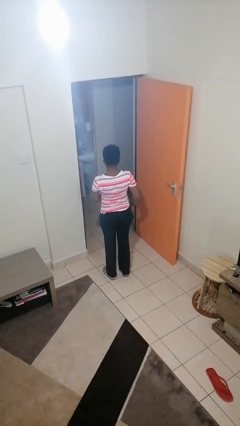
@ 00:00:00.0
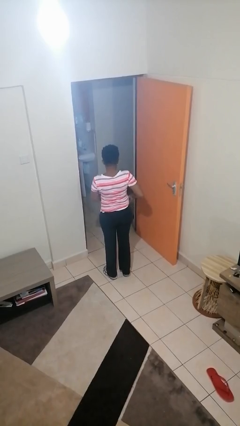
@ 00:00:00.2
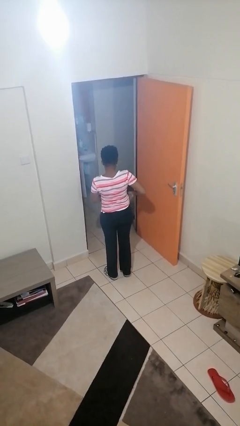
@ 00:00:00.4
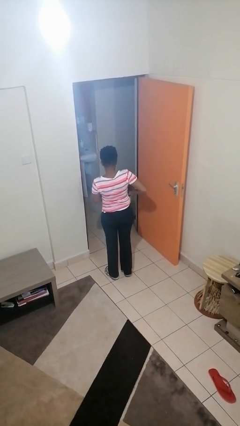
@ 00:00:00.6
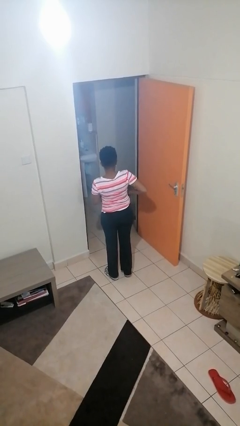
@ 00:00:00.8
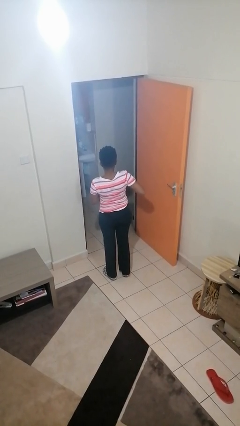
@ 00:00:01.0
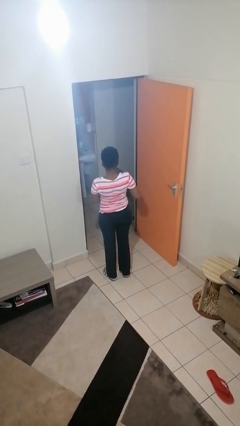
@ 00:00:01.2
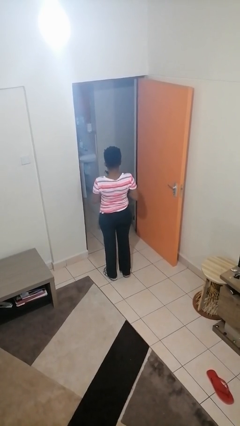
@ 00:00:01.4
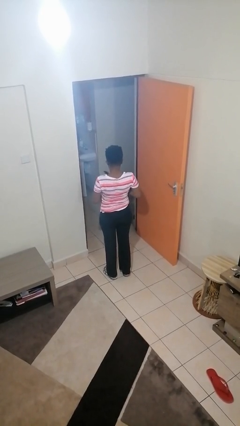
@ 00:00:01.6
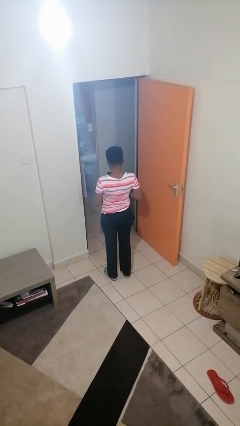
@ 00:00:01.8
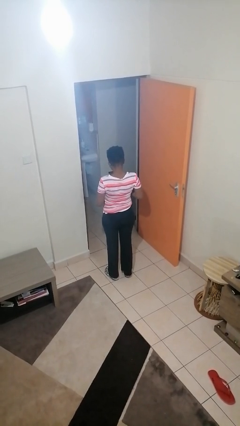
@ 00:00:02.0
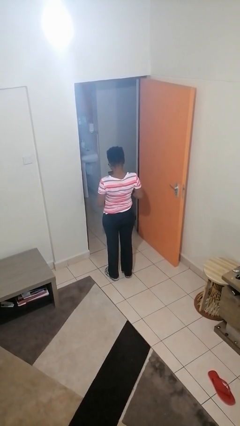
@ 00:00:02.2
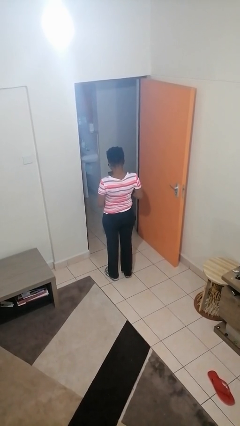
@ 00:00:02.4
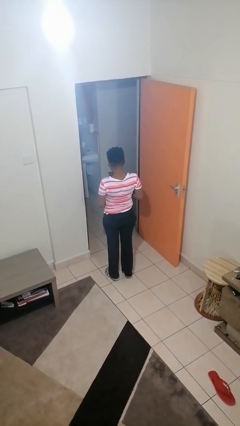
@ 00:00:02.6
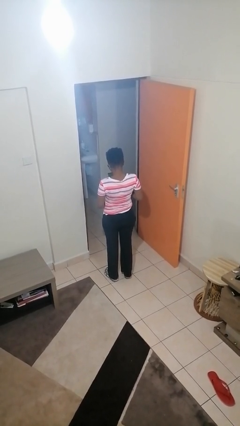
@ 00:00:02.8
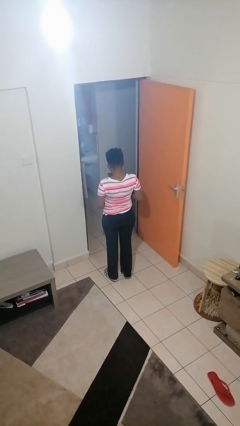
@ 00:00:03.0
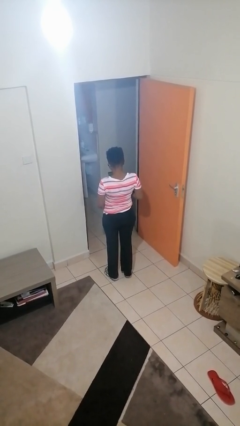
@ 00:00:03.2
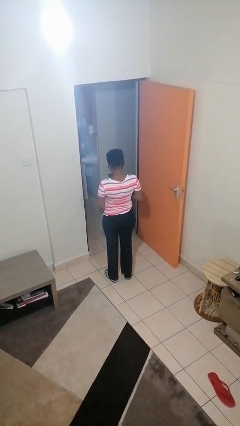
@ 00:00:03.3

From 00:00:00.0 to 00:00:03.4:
person takes phone from pocket

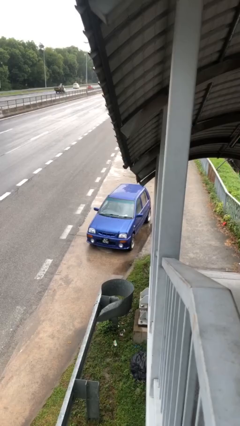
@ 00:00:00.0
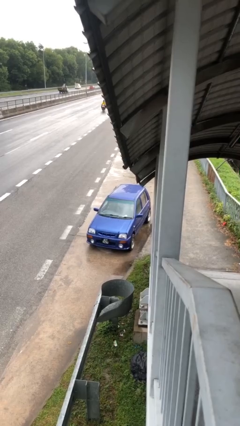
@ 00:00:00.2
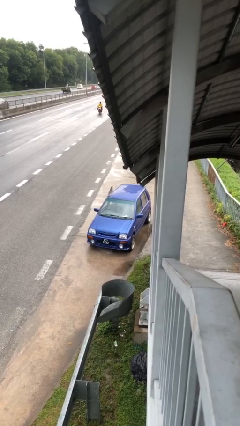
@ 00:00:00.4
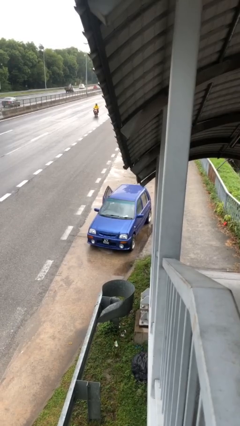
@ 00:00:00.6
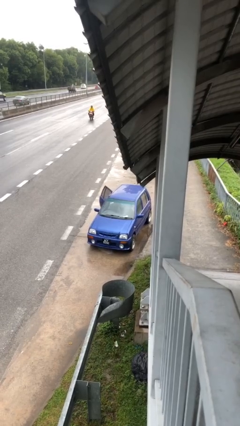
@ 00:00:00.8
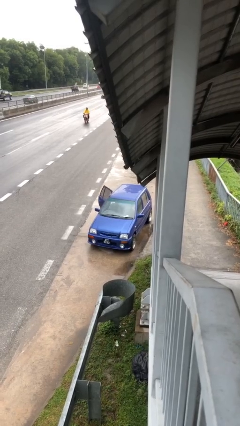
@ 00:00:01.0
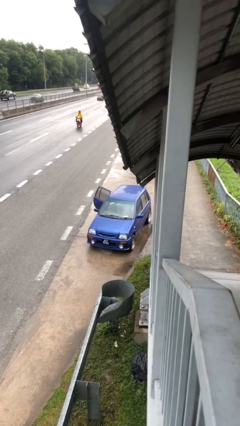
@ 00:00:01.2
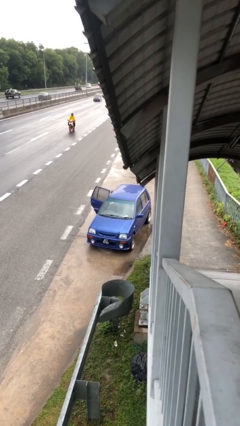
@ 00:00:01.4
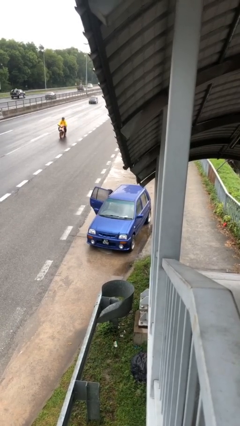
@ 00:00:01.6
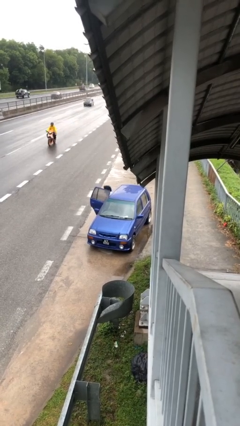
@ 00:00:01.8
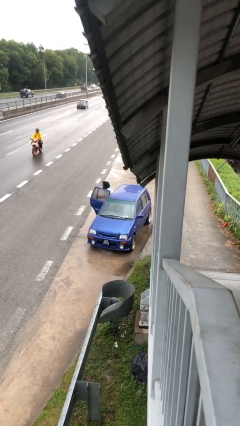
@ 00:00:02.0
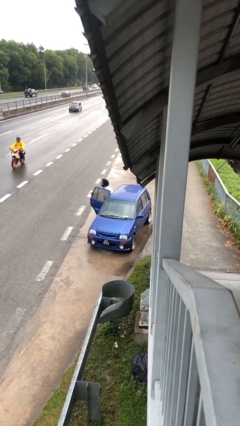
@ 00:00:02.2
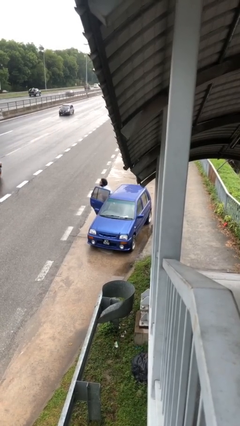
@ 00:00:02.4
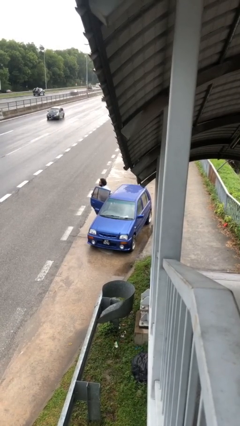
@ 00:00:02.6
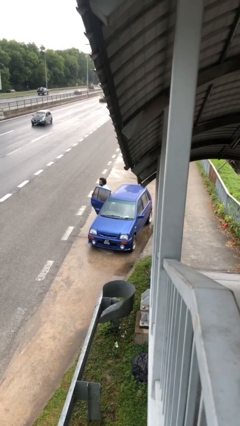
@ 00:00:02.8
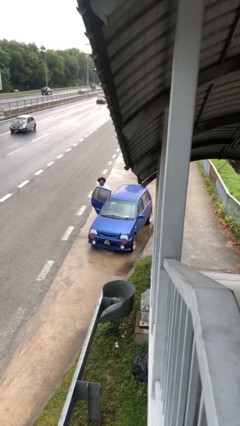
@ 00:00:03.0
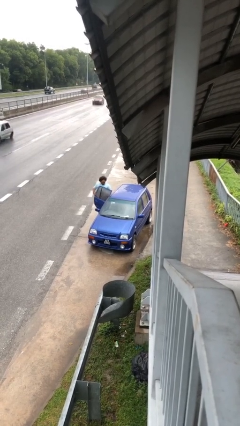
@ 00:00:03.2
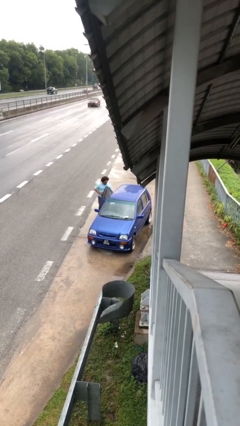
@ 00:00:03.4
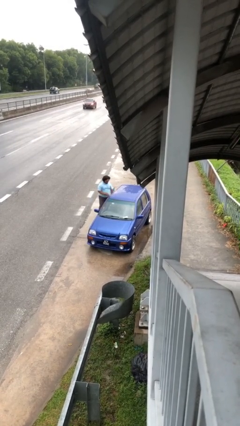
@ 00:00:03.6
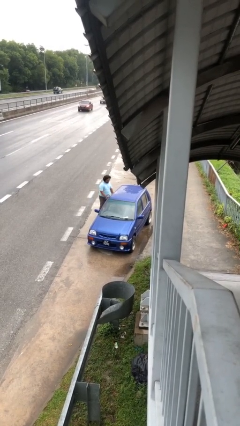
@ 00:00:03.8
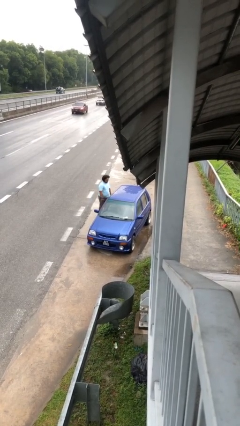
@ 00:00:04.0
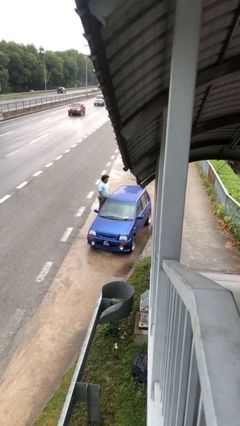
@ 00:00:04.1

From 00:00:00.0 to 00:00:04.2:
car drops off person

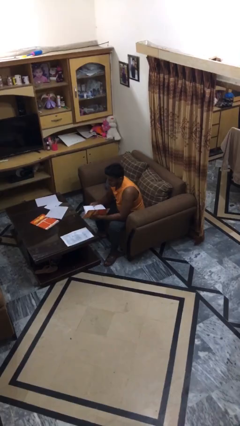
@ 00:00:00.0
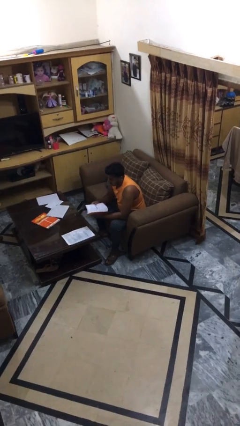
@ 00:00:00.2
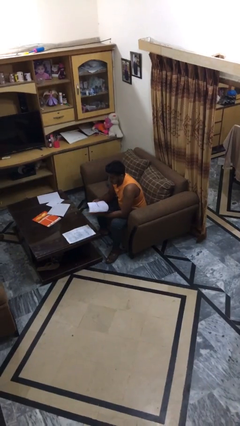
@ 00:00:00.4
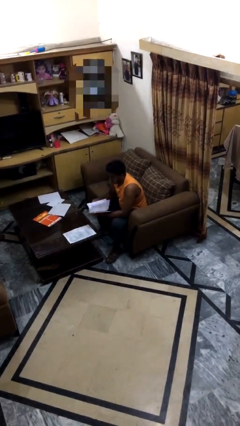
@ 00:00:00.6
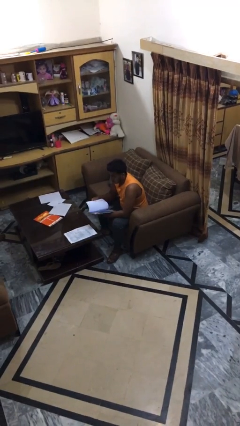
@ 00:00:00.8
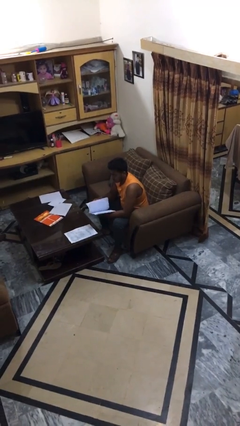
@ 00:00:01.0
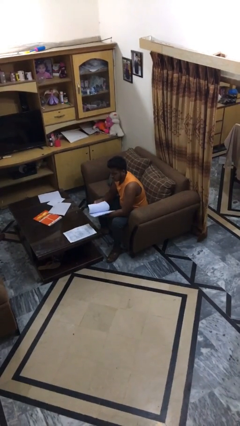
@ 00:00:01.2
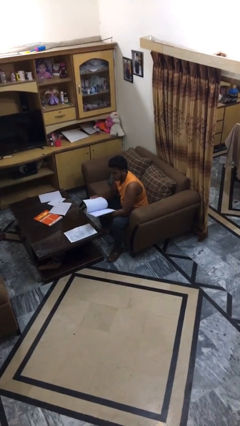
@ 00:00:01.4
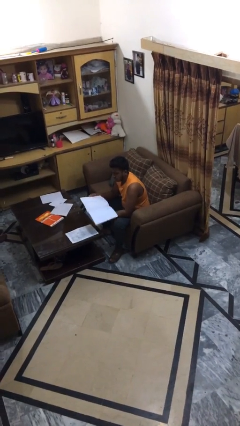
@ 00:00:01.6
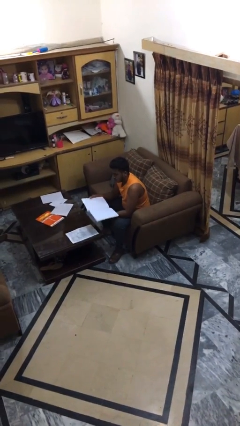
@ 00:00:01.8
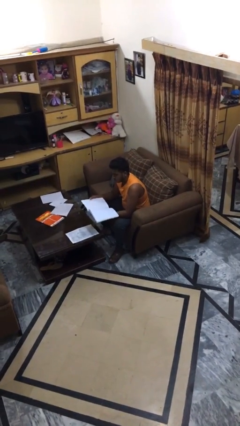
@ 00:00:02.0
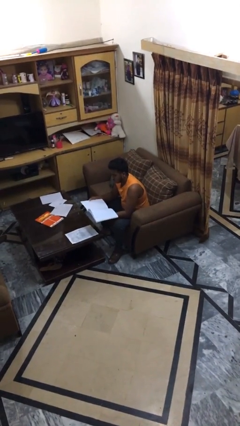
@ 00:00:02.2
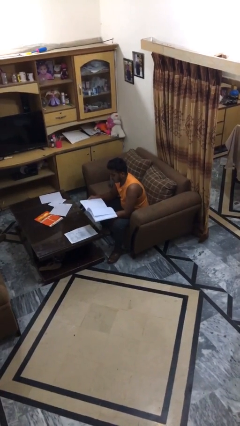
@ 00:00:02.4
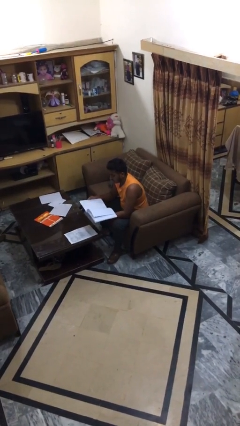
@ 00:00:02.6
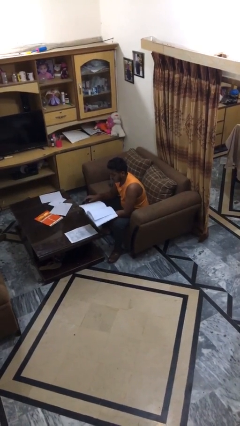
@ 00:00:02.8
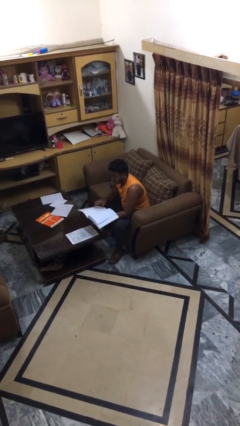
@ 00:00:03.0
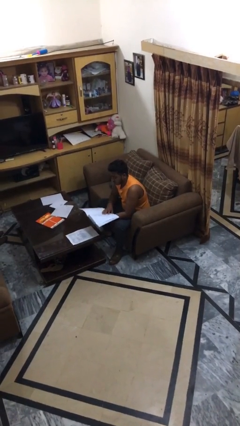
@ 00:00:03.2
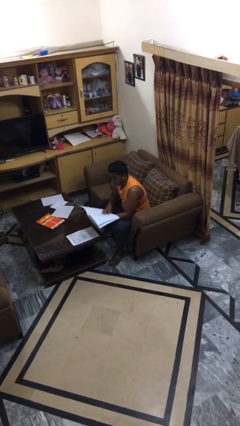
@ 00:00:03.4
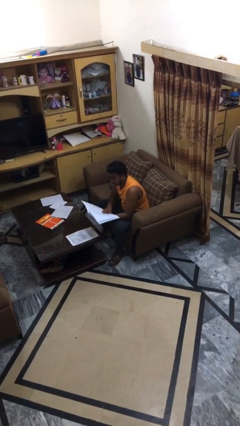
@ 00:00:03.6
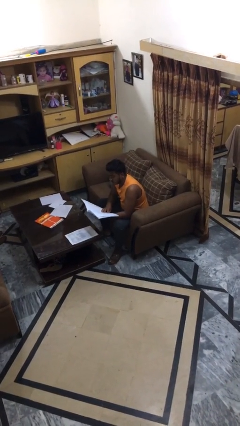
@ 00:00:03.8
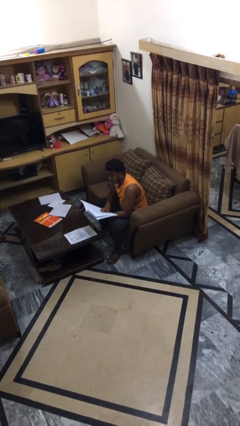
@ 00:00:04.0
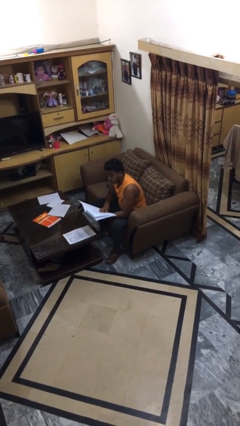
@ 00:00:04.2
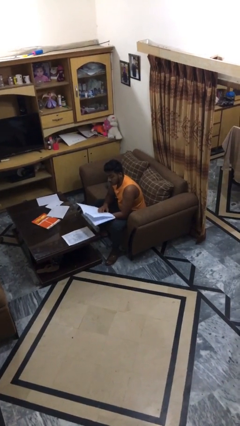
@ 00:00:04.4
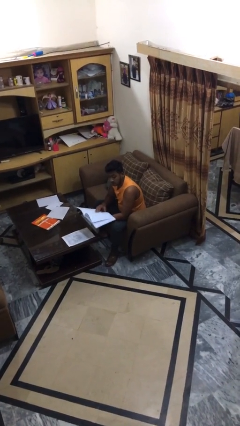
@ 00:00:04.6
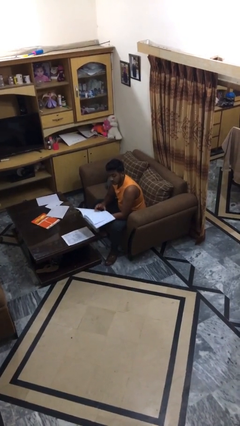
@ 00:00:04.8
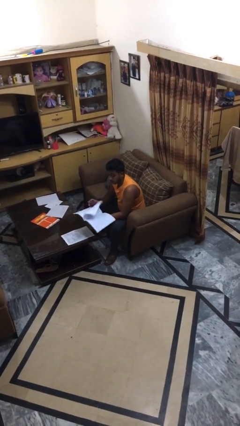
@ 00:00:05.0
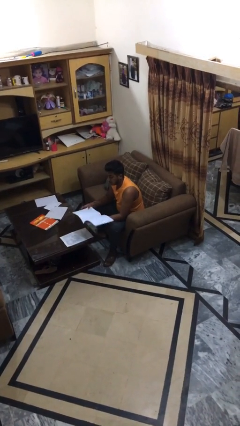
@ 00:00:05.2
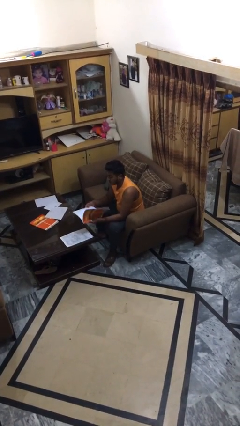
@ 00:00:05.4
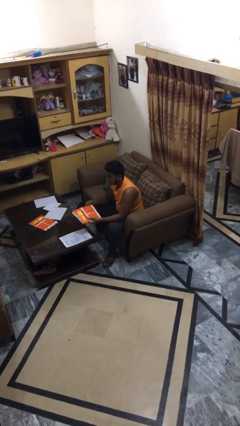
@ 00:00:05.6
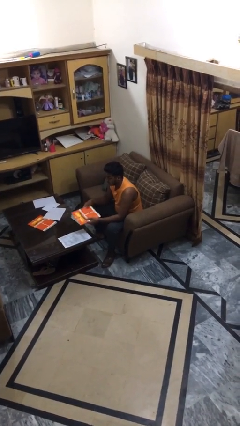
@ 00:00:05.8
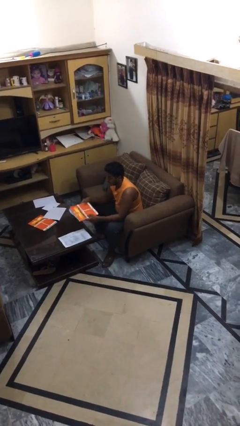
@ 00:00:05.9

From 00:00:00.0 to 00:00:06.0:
person reads document

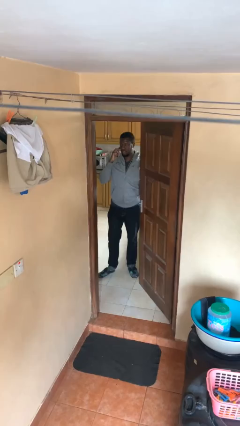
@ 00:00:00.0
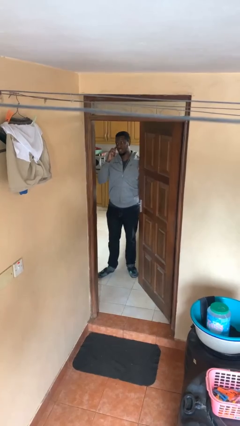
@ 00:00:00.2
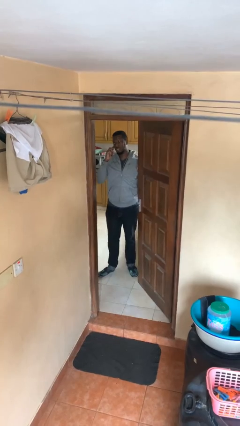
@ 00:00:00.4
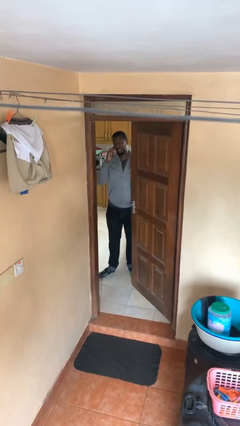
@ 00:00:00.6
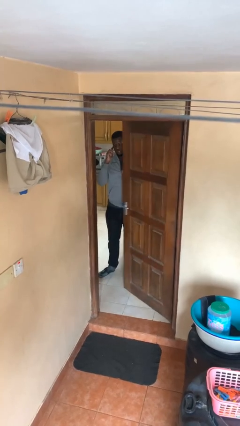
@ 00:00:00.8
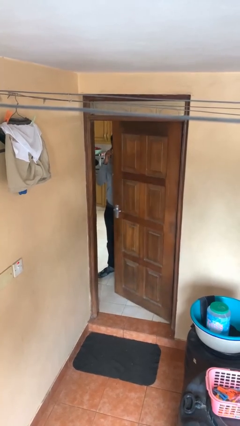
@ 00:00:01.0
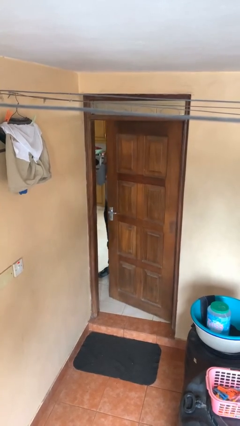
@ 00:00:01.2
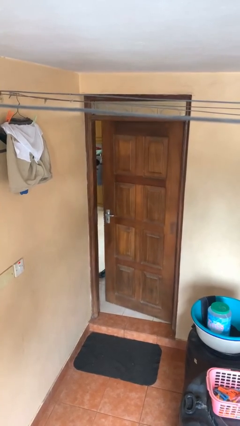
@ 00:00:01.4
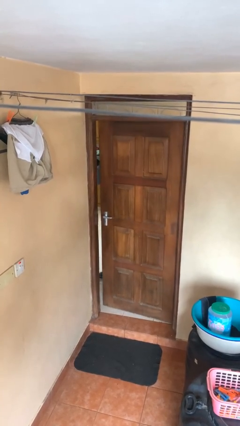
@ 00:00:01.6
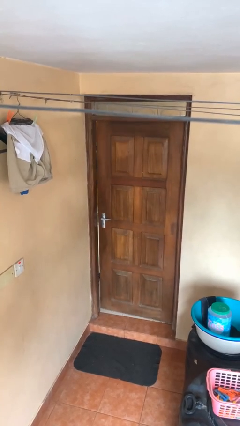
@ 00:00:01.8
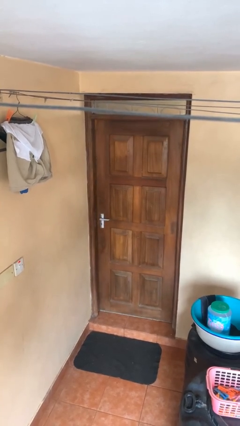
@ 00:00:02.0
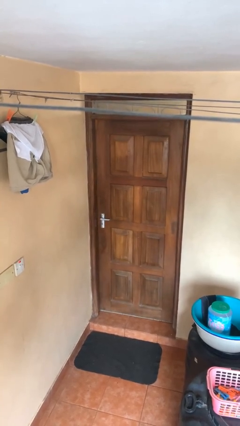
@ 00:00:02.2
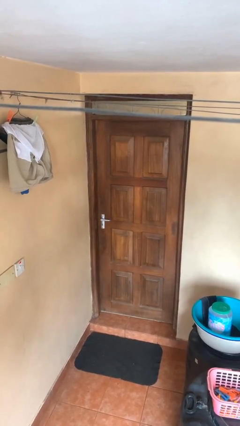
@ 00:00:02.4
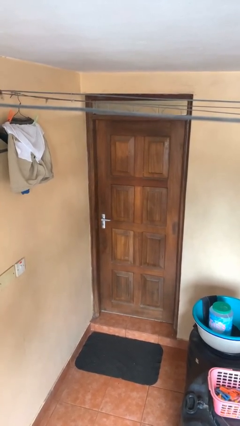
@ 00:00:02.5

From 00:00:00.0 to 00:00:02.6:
person closes facility door

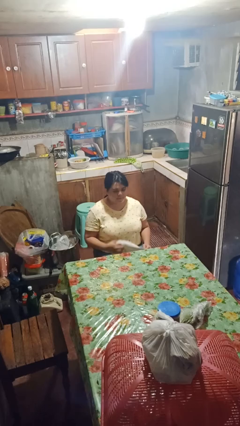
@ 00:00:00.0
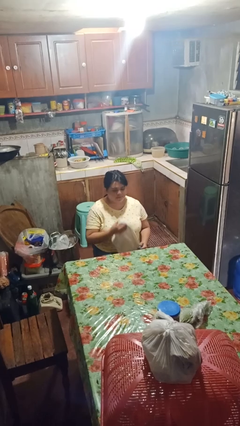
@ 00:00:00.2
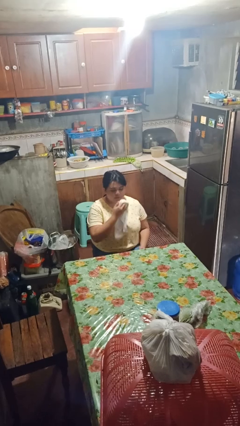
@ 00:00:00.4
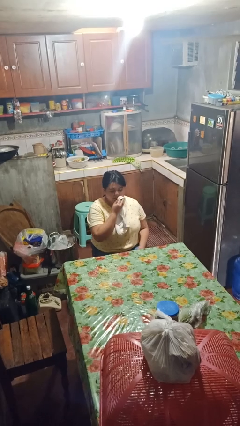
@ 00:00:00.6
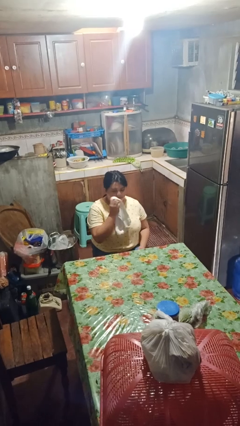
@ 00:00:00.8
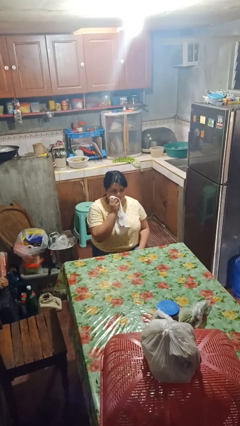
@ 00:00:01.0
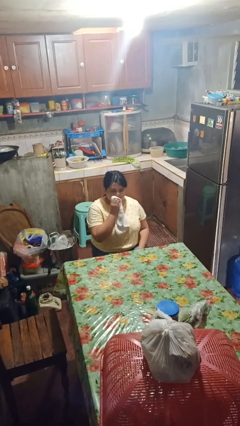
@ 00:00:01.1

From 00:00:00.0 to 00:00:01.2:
person wipes mouth with napkin
